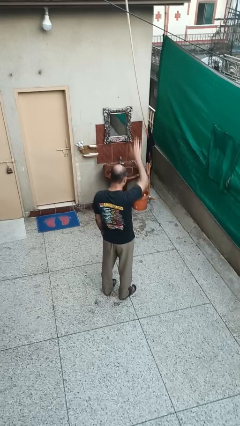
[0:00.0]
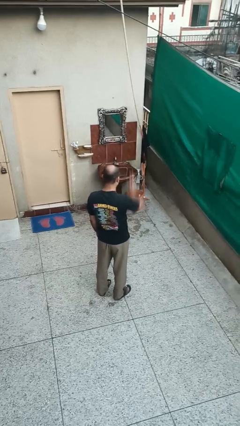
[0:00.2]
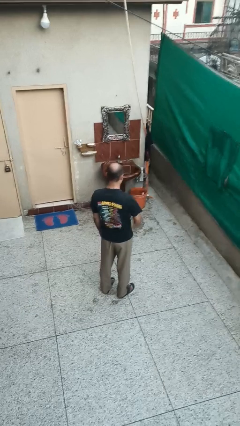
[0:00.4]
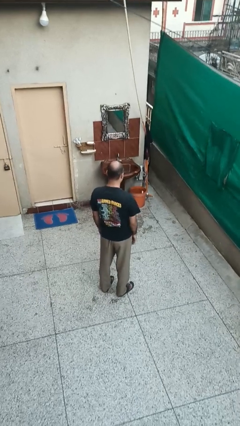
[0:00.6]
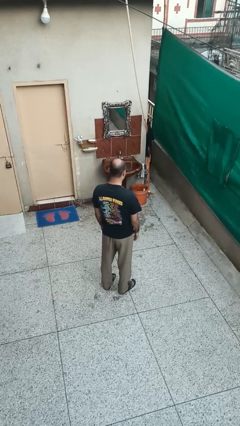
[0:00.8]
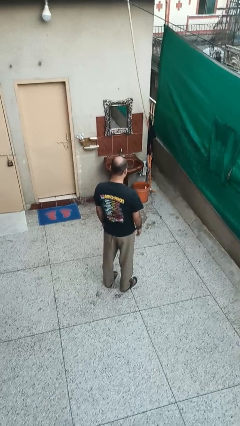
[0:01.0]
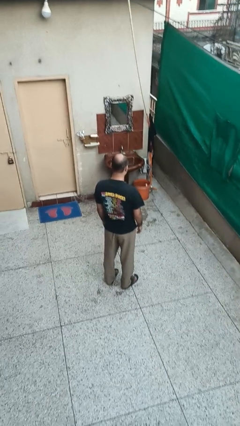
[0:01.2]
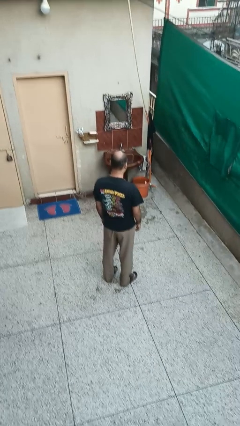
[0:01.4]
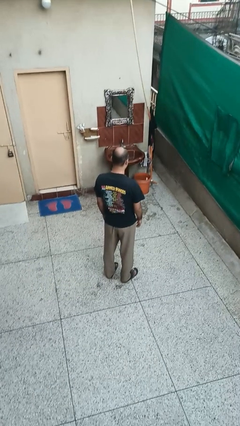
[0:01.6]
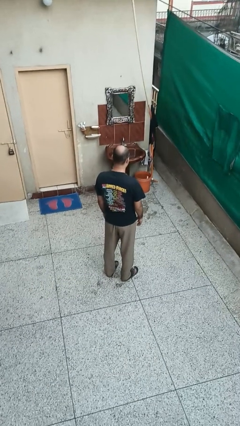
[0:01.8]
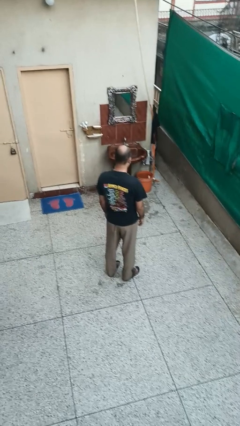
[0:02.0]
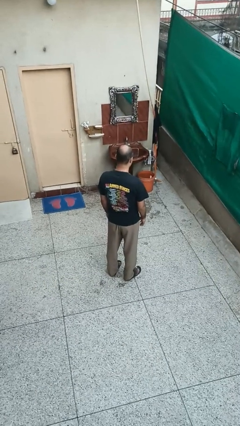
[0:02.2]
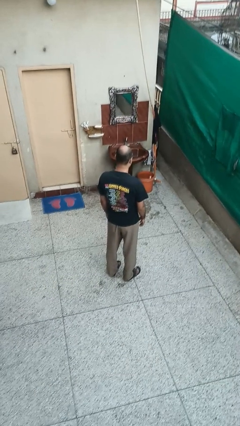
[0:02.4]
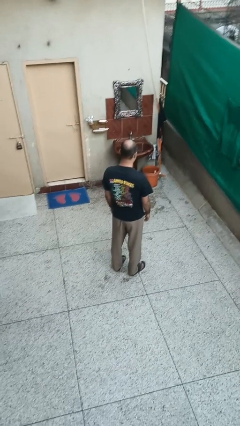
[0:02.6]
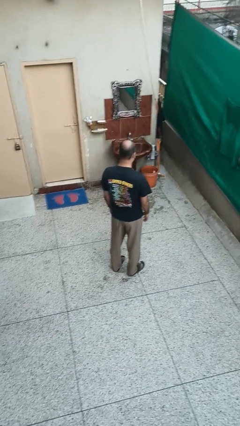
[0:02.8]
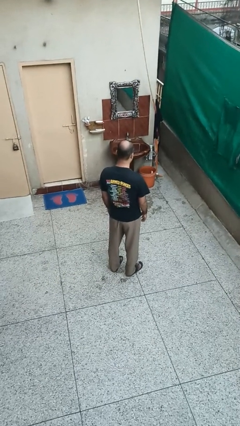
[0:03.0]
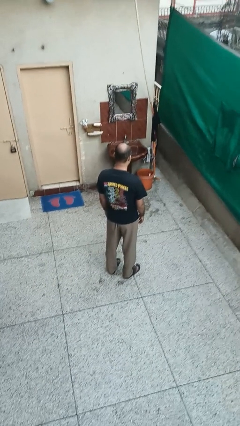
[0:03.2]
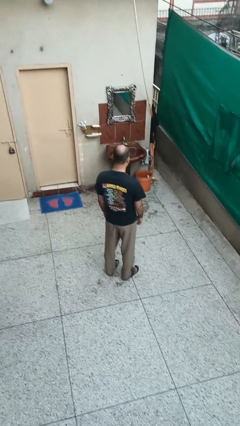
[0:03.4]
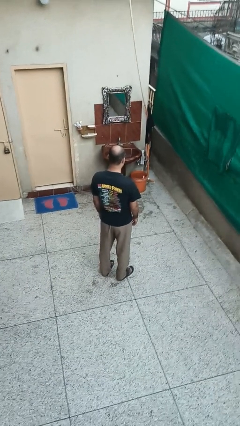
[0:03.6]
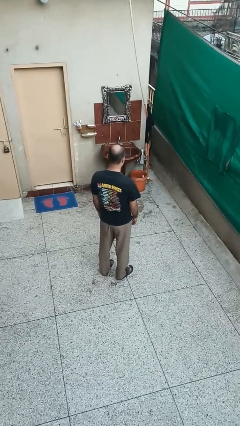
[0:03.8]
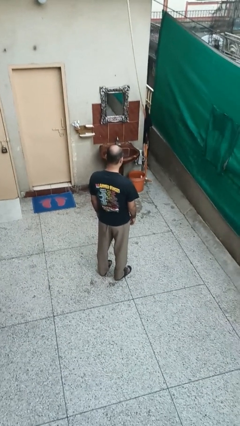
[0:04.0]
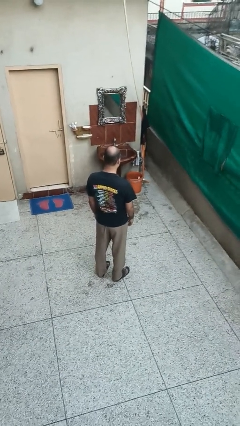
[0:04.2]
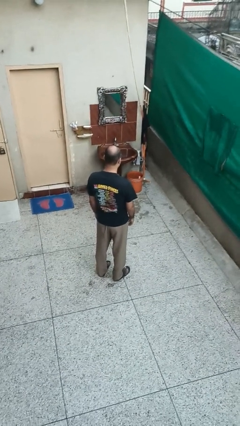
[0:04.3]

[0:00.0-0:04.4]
person gestures lower hand

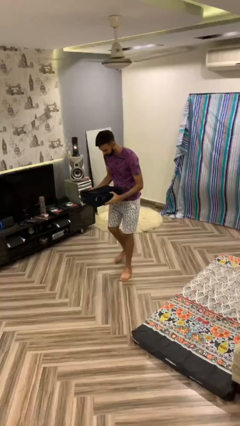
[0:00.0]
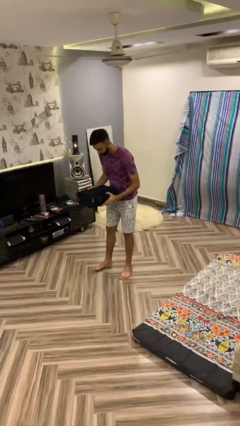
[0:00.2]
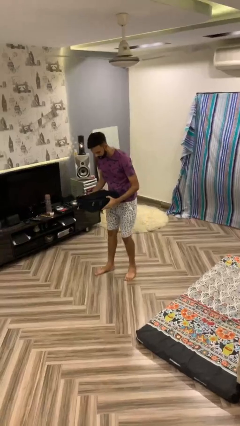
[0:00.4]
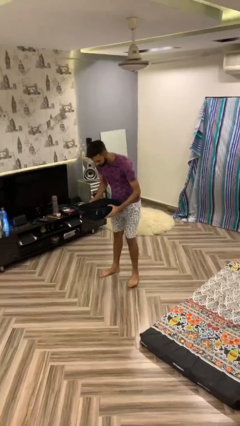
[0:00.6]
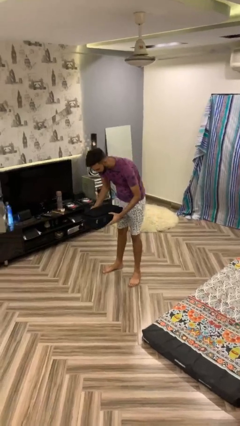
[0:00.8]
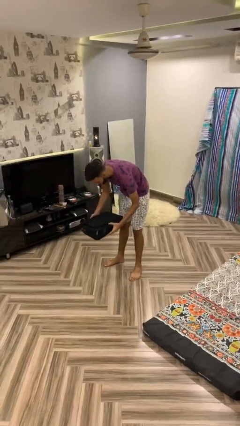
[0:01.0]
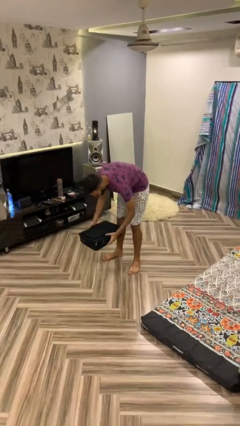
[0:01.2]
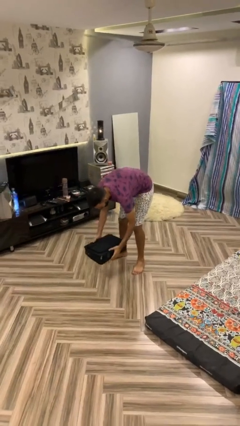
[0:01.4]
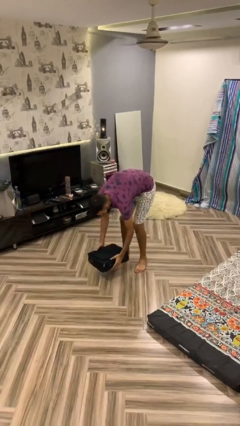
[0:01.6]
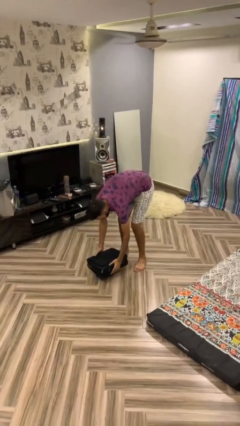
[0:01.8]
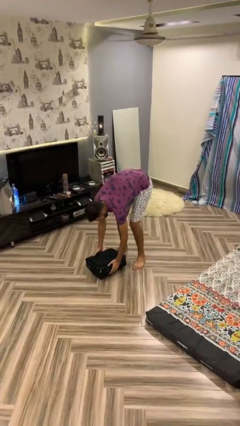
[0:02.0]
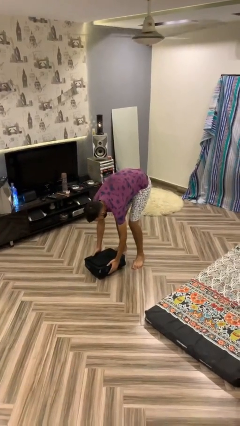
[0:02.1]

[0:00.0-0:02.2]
person puts down object on floor

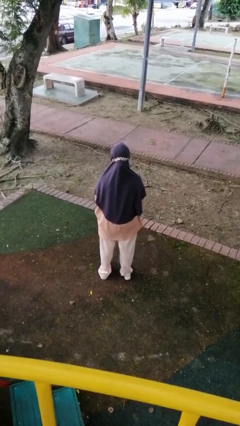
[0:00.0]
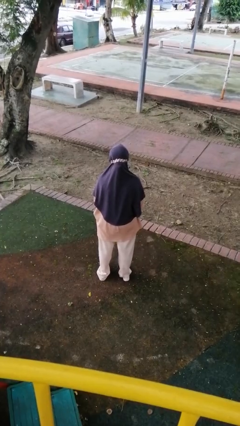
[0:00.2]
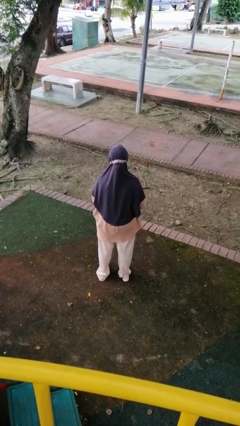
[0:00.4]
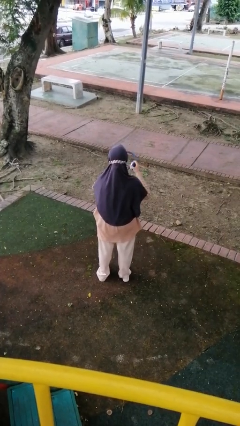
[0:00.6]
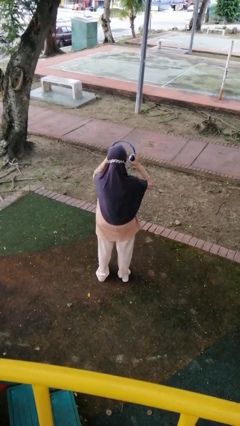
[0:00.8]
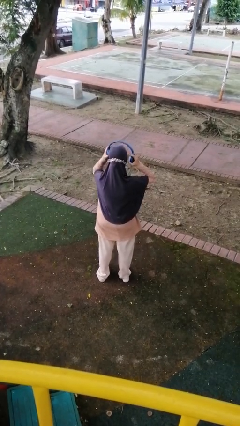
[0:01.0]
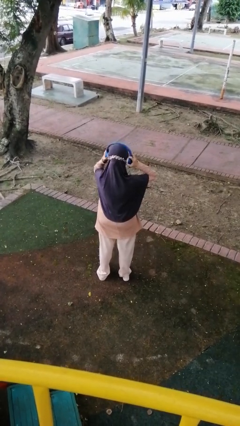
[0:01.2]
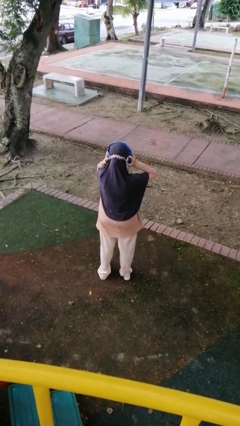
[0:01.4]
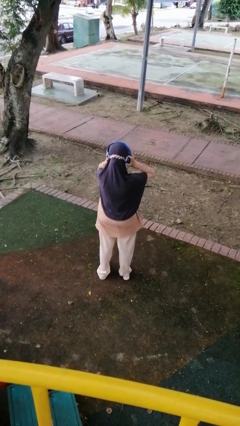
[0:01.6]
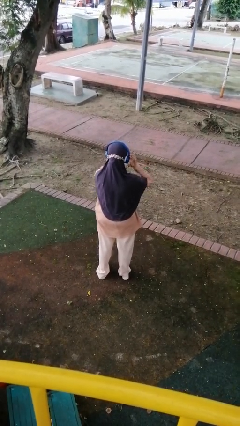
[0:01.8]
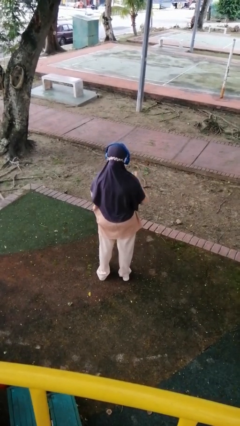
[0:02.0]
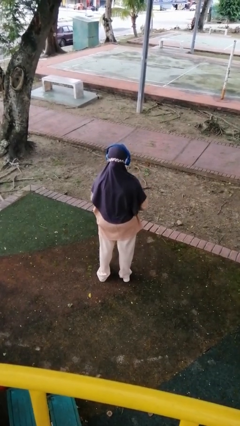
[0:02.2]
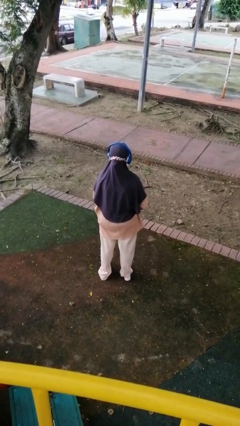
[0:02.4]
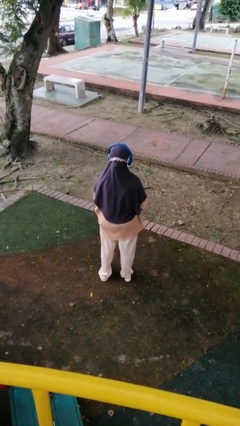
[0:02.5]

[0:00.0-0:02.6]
person puts on headphones

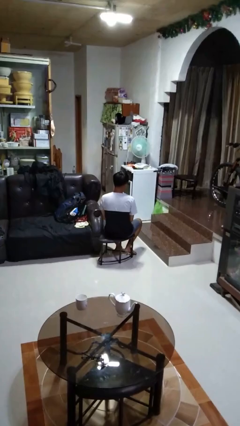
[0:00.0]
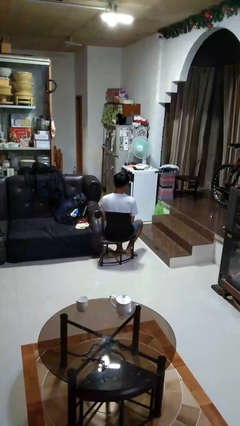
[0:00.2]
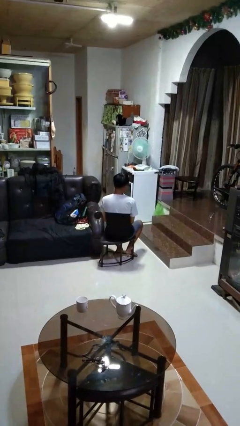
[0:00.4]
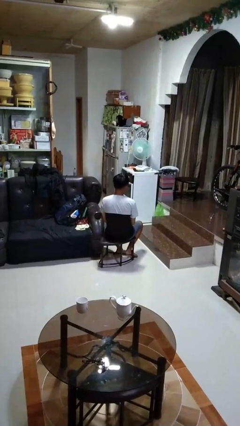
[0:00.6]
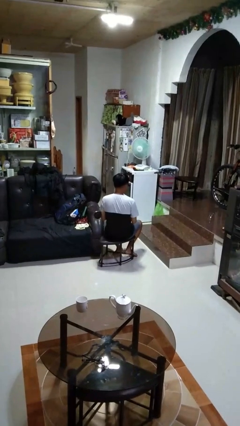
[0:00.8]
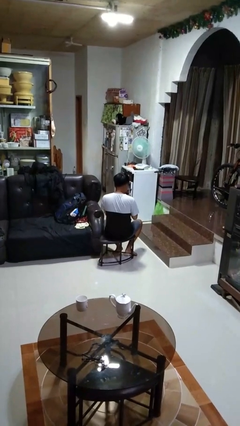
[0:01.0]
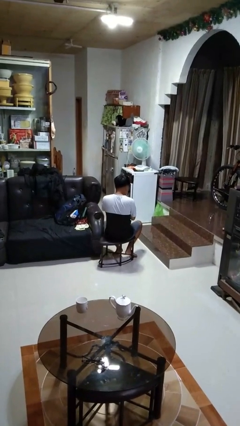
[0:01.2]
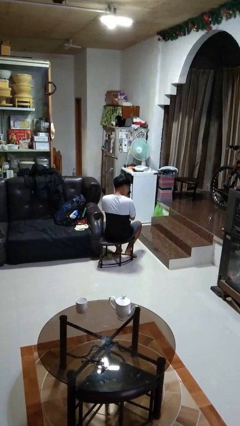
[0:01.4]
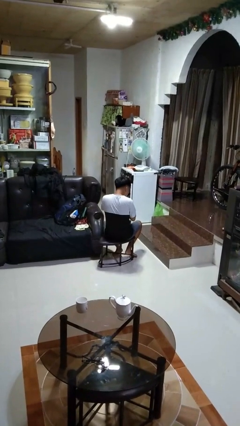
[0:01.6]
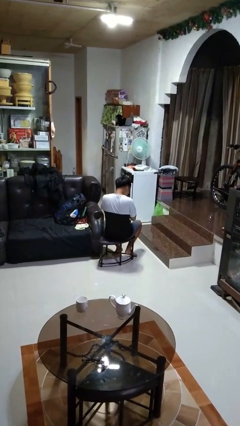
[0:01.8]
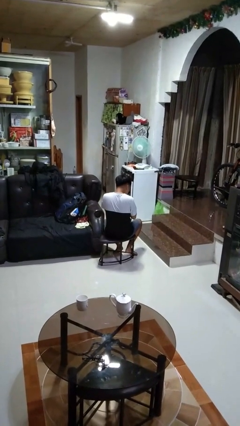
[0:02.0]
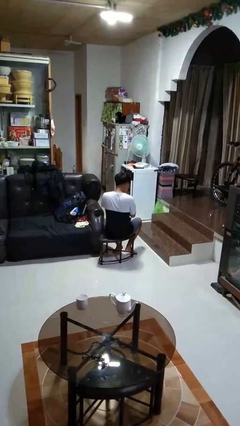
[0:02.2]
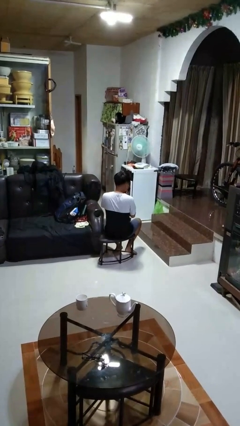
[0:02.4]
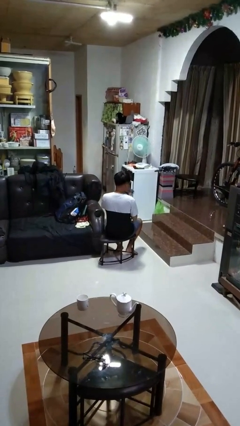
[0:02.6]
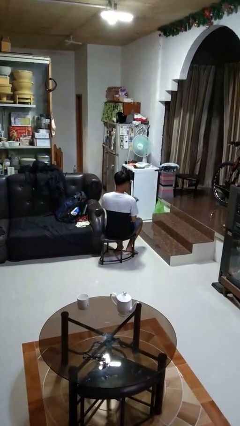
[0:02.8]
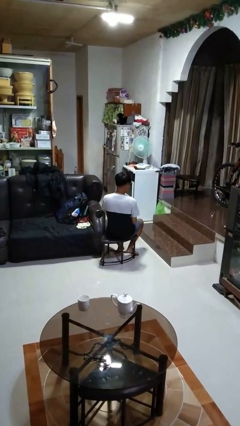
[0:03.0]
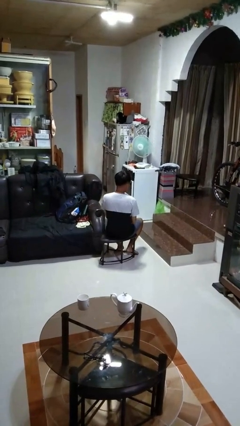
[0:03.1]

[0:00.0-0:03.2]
person blows nose

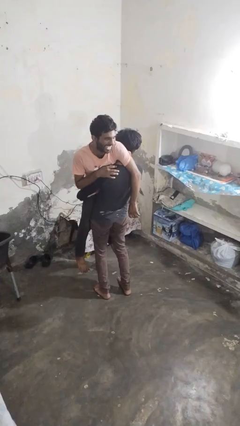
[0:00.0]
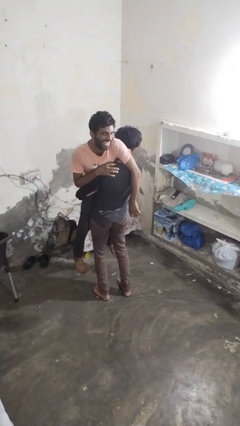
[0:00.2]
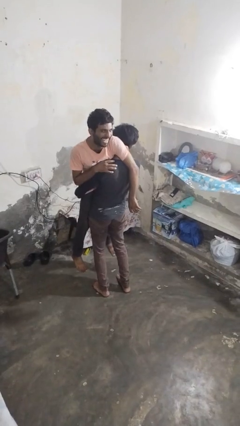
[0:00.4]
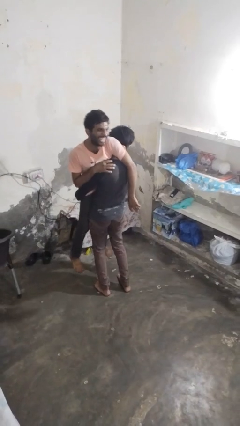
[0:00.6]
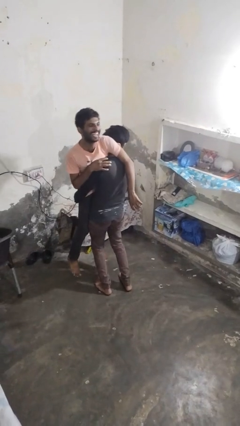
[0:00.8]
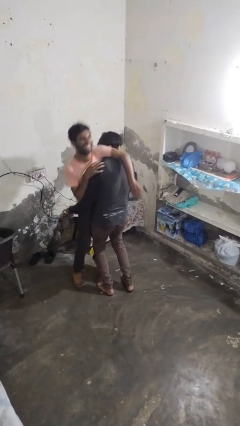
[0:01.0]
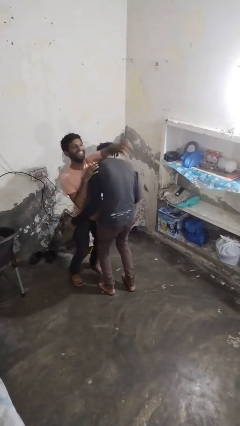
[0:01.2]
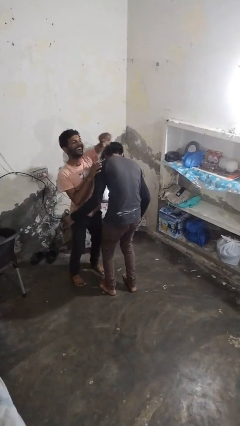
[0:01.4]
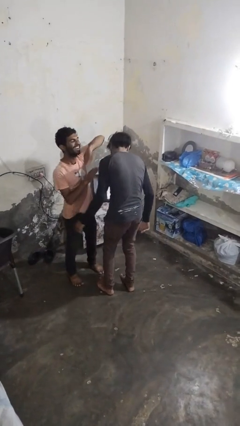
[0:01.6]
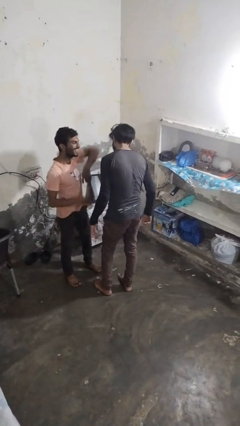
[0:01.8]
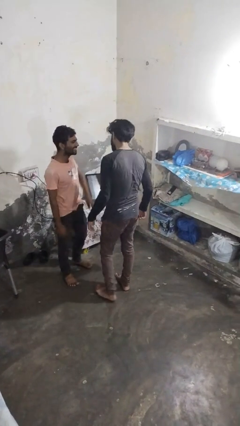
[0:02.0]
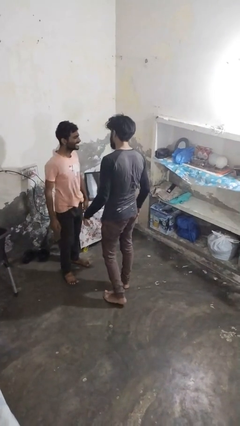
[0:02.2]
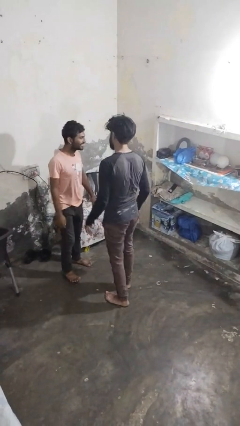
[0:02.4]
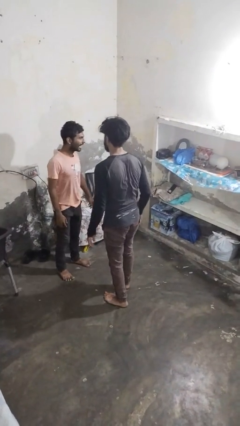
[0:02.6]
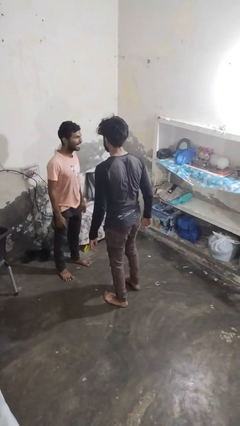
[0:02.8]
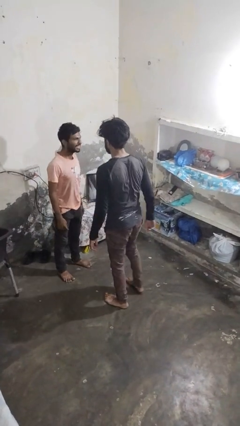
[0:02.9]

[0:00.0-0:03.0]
person puts down person

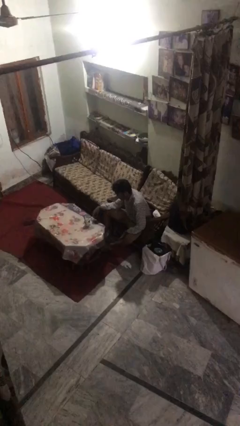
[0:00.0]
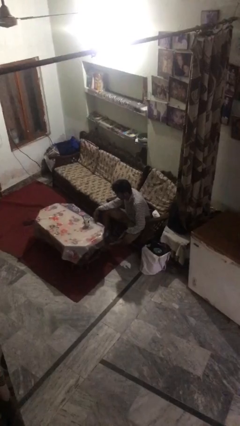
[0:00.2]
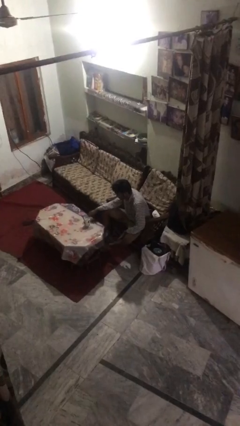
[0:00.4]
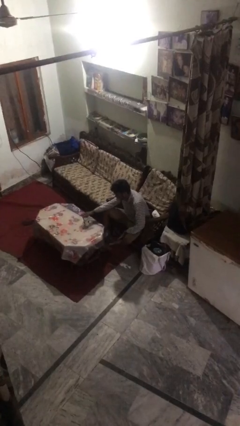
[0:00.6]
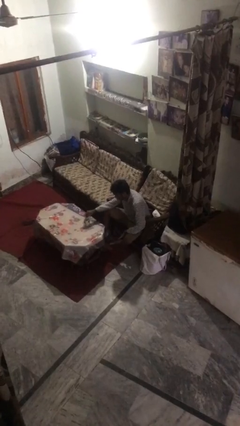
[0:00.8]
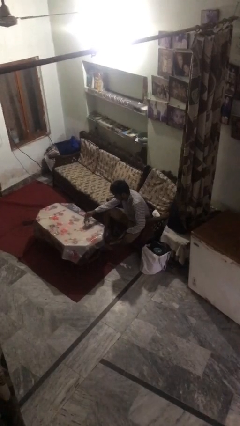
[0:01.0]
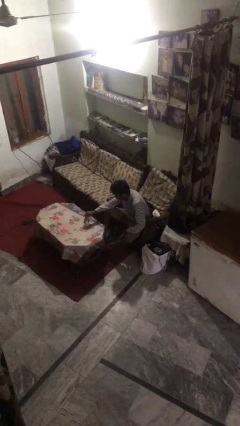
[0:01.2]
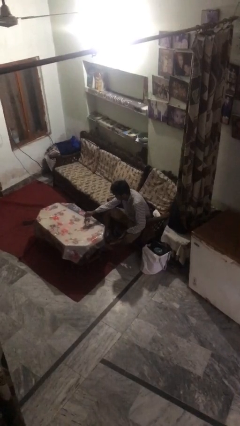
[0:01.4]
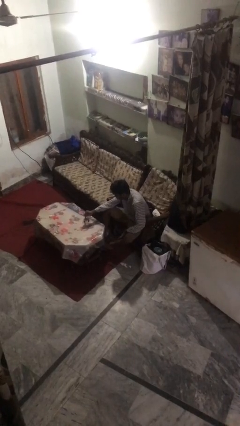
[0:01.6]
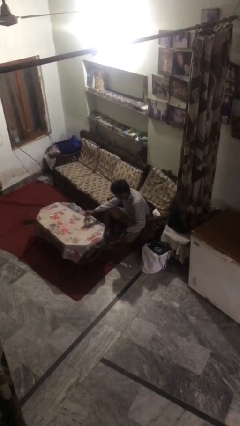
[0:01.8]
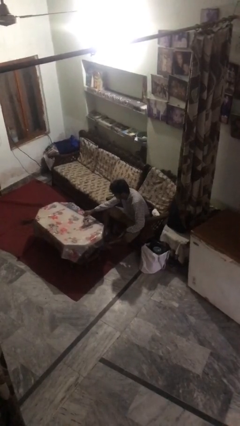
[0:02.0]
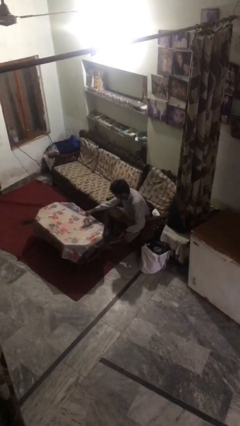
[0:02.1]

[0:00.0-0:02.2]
person stirs mug
